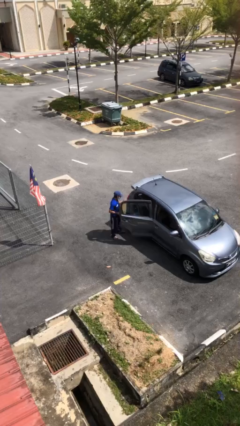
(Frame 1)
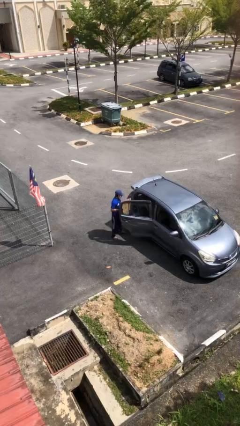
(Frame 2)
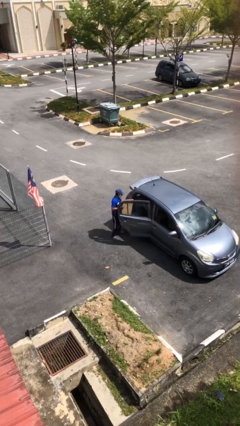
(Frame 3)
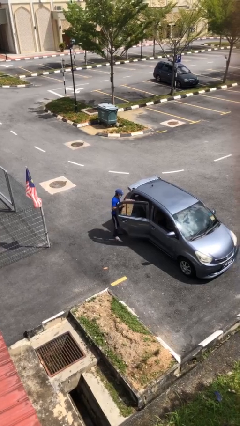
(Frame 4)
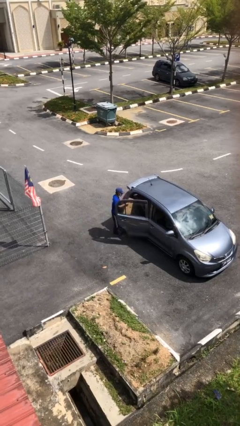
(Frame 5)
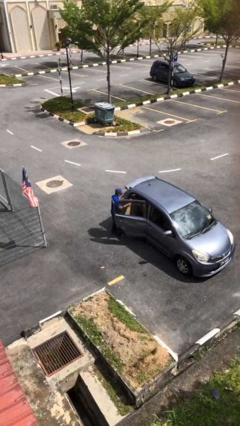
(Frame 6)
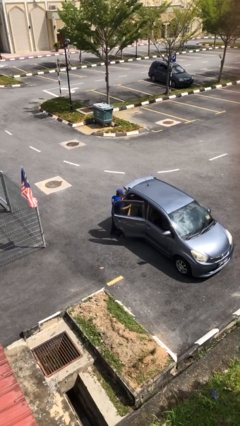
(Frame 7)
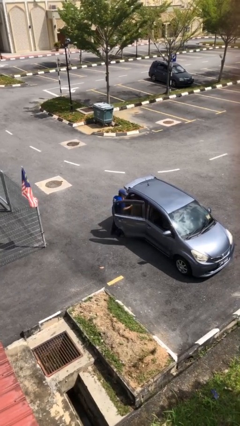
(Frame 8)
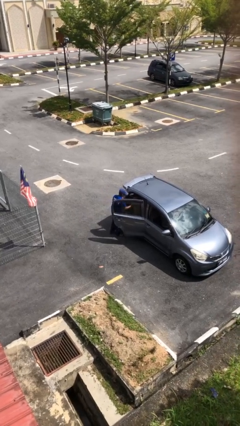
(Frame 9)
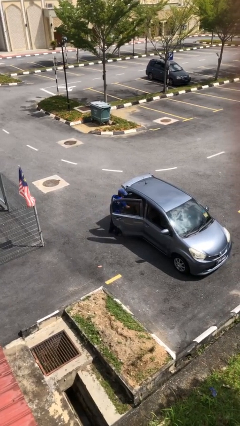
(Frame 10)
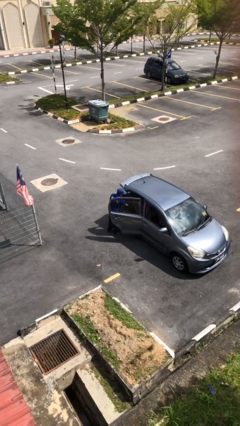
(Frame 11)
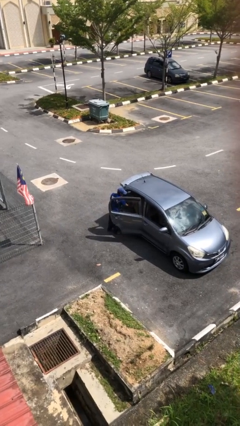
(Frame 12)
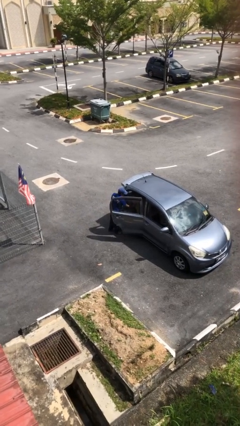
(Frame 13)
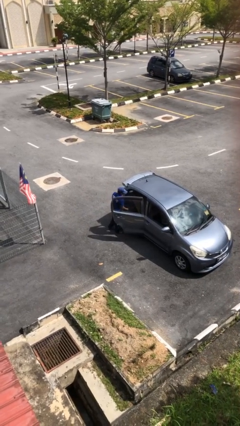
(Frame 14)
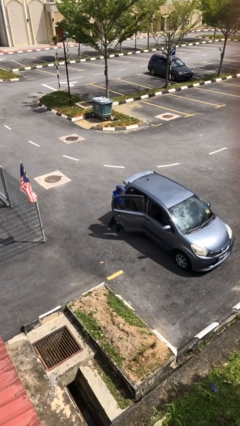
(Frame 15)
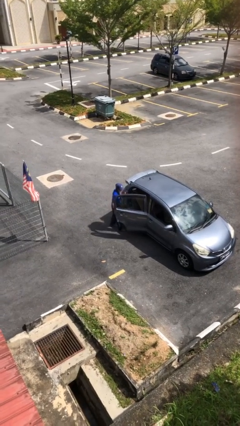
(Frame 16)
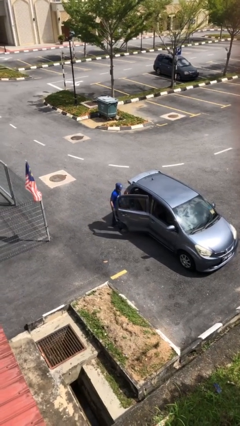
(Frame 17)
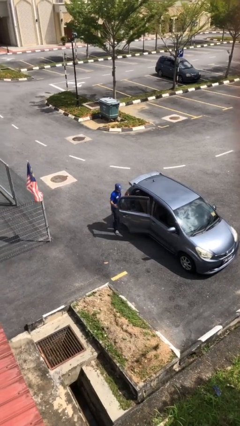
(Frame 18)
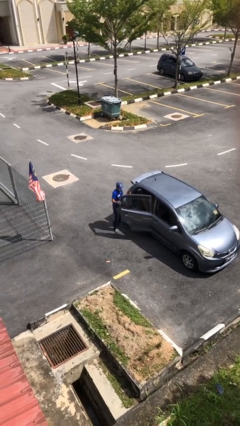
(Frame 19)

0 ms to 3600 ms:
person loads car

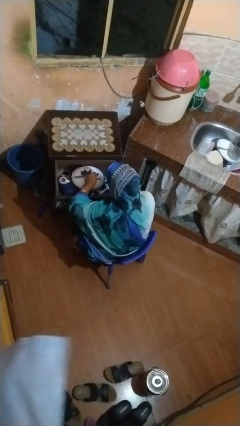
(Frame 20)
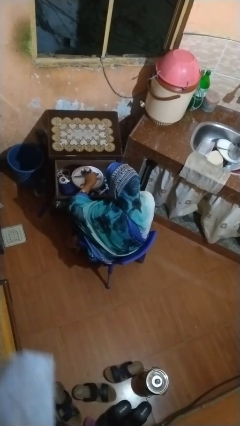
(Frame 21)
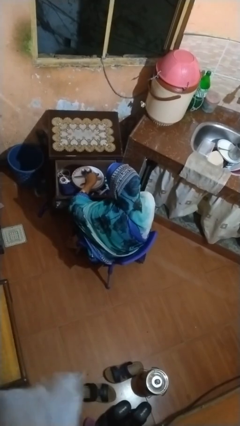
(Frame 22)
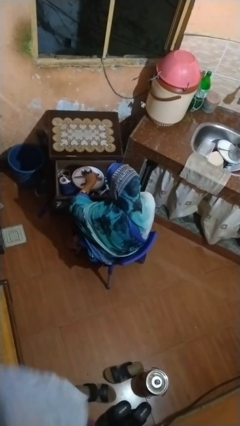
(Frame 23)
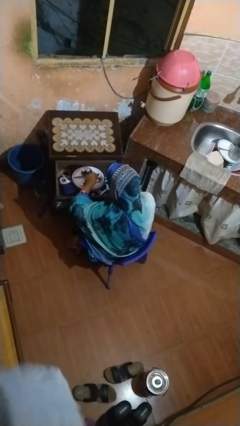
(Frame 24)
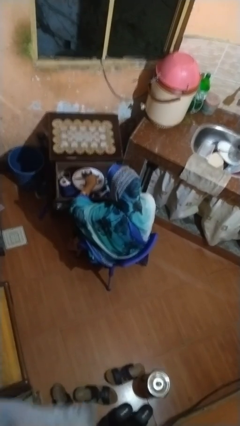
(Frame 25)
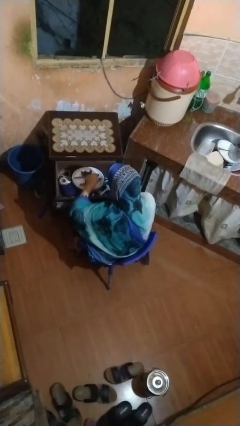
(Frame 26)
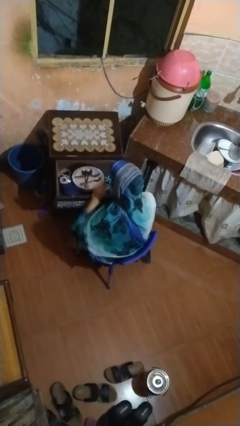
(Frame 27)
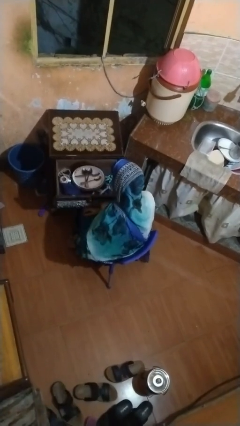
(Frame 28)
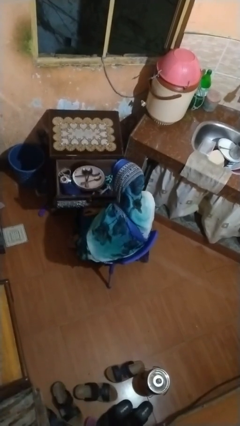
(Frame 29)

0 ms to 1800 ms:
person puts object into kitchen drawer

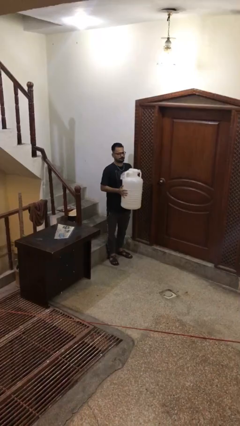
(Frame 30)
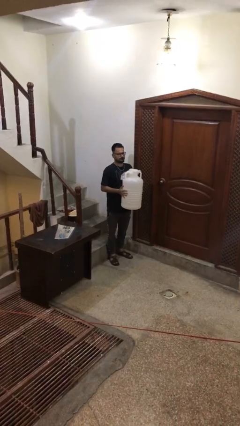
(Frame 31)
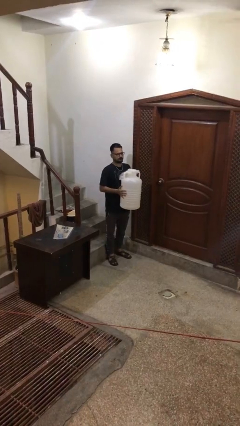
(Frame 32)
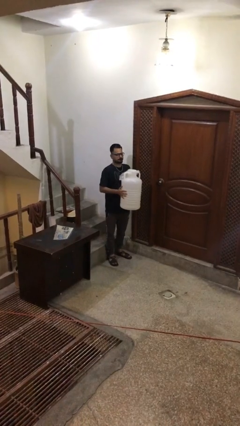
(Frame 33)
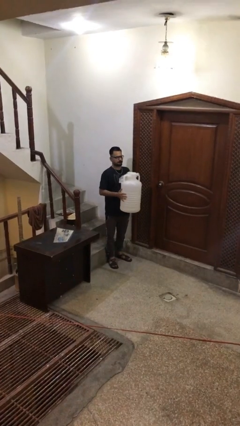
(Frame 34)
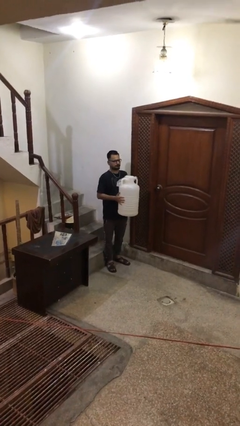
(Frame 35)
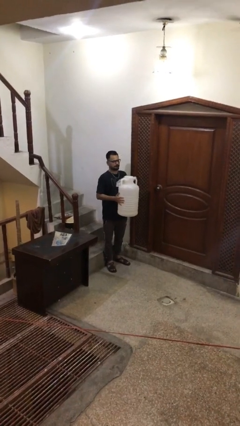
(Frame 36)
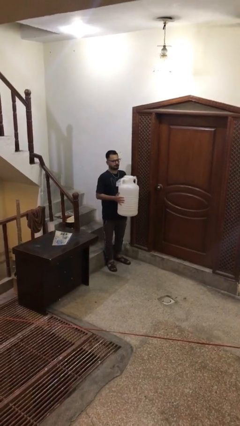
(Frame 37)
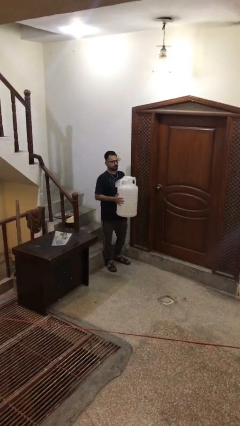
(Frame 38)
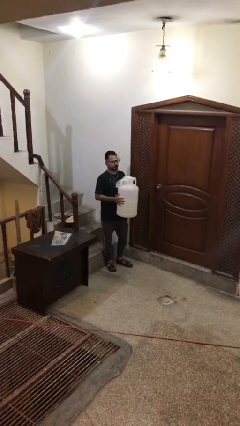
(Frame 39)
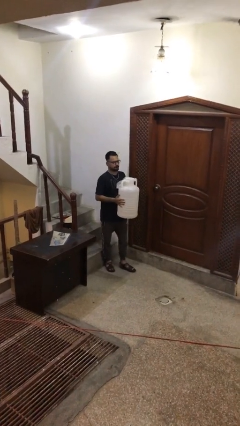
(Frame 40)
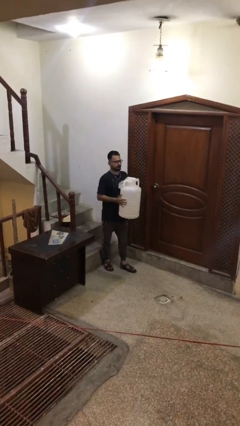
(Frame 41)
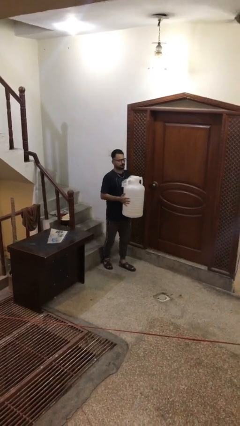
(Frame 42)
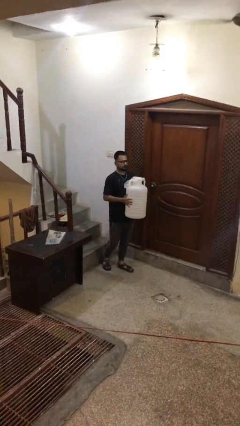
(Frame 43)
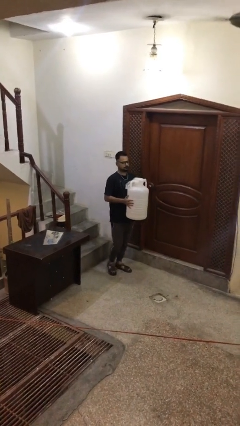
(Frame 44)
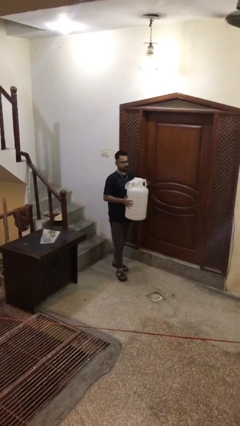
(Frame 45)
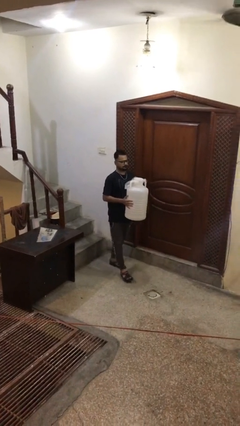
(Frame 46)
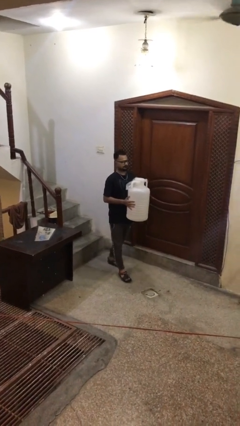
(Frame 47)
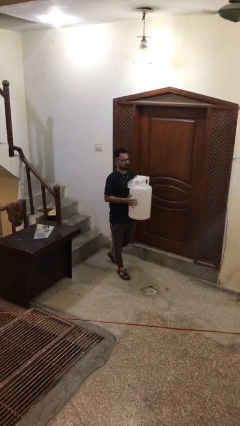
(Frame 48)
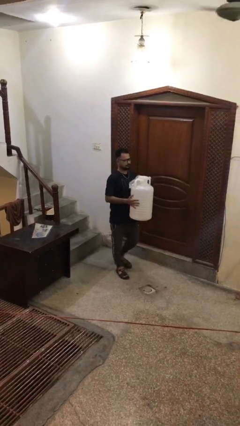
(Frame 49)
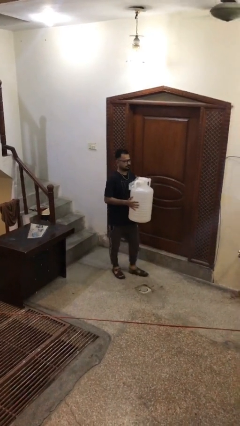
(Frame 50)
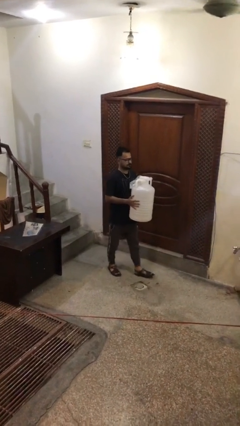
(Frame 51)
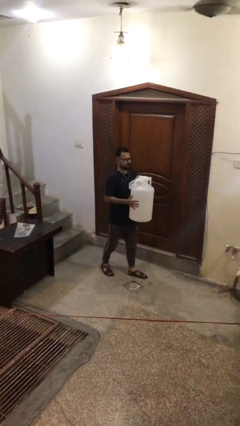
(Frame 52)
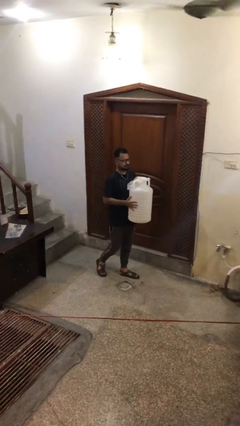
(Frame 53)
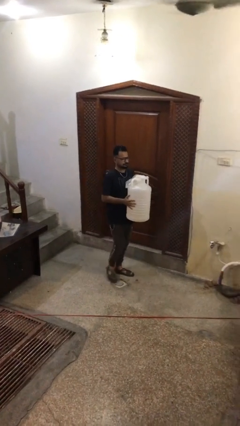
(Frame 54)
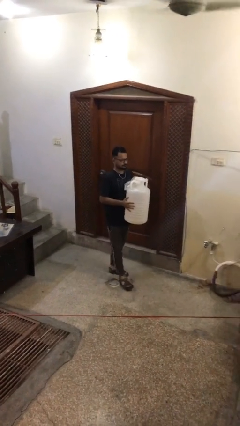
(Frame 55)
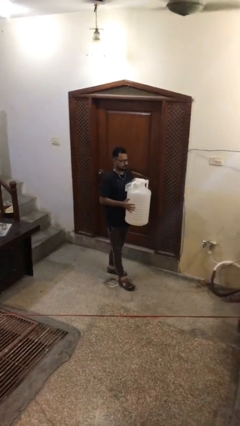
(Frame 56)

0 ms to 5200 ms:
person carries heavy object

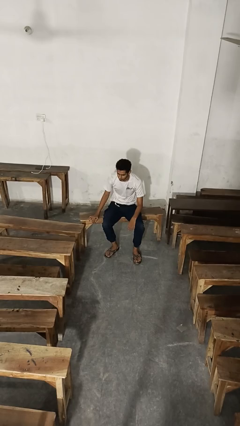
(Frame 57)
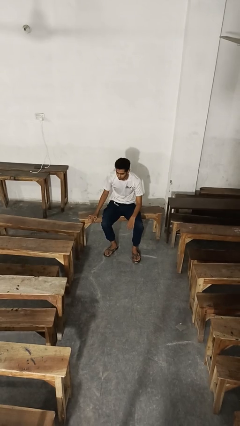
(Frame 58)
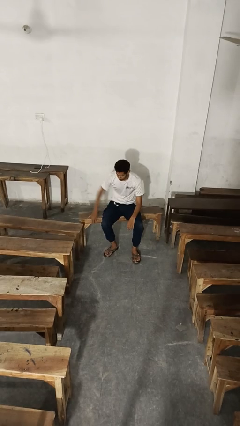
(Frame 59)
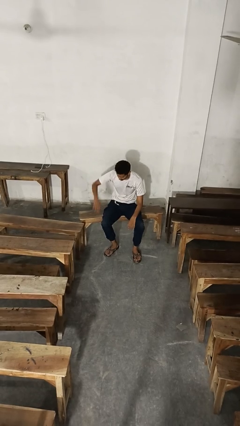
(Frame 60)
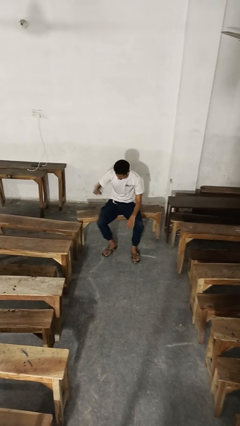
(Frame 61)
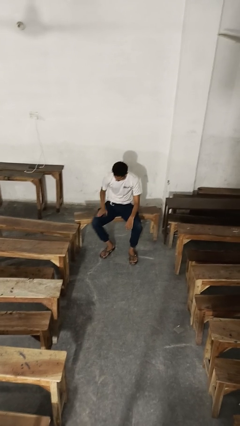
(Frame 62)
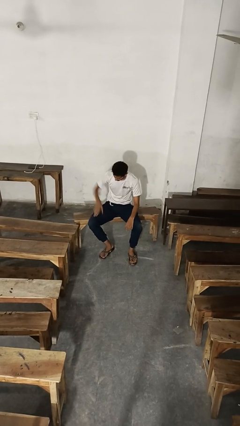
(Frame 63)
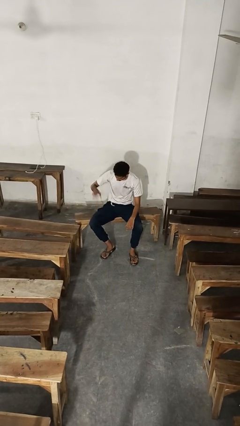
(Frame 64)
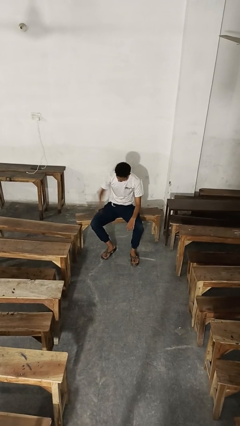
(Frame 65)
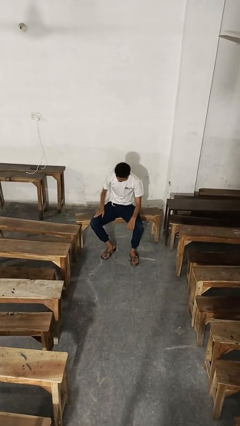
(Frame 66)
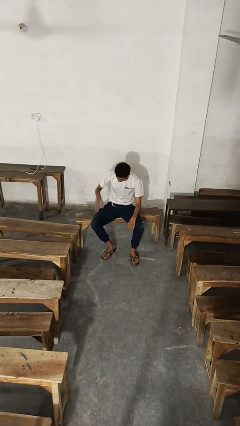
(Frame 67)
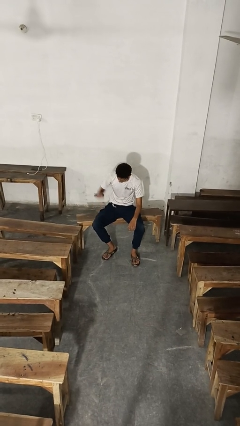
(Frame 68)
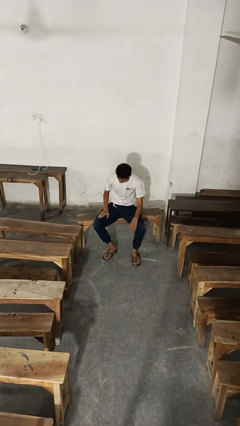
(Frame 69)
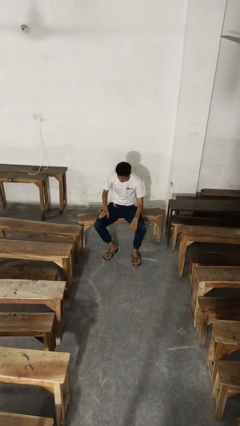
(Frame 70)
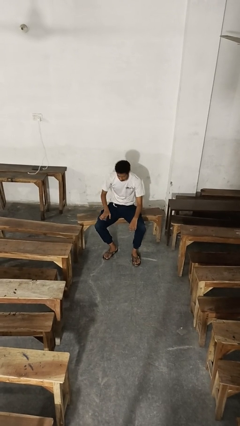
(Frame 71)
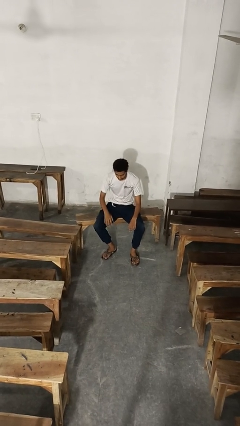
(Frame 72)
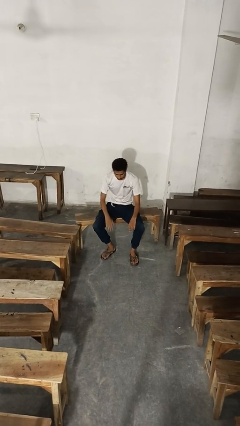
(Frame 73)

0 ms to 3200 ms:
person slaps hands on thighs

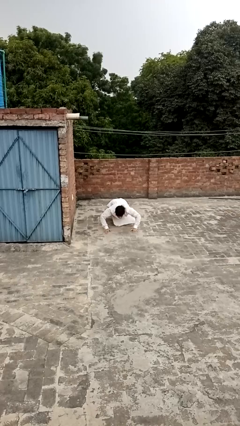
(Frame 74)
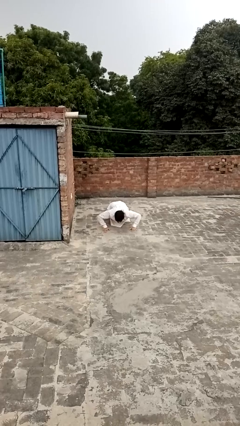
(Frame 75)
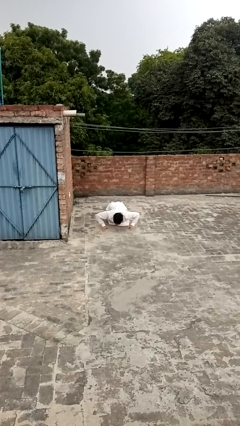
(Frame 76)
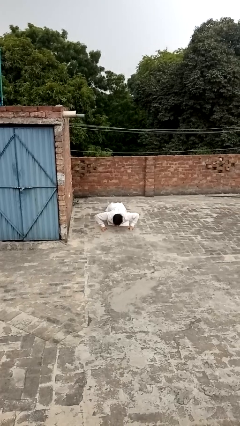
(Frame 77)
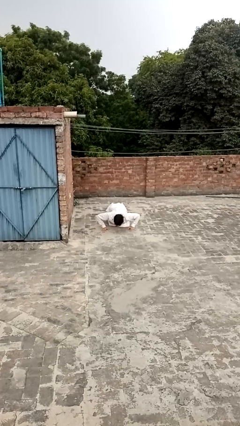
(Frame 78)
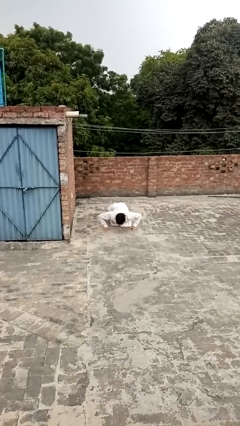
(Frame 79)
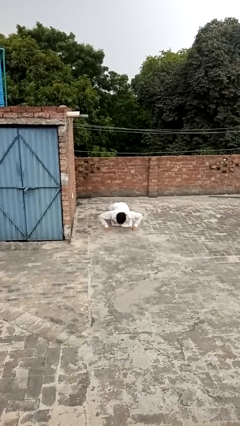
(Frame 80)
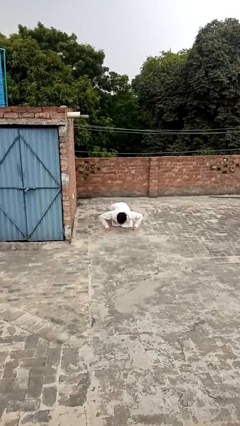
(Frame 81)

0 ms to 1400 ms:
person exercises with pushup

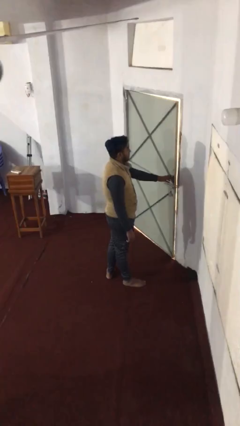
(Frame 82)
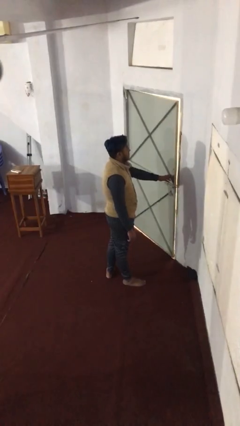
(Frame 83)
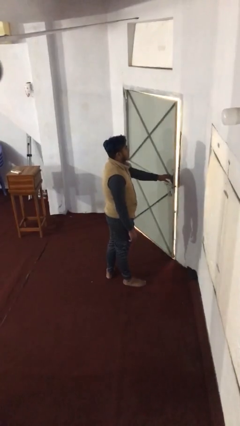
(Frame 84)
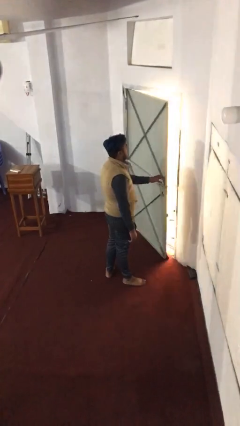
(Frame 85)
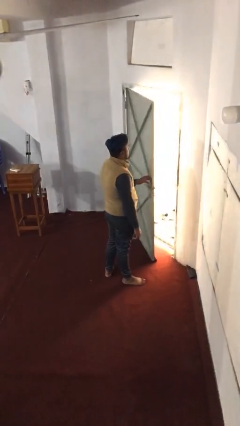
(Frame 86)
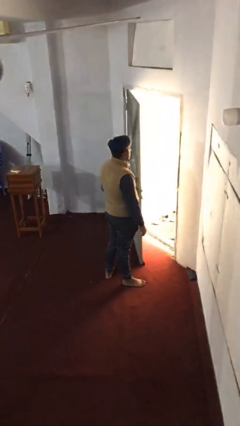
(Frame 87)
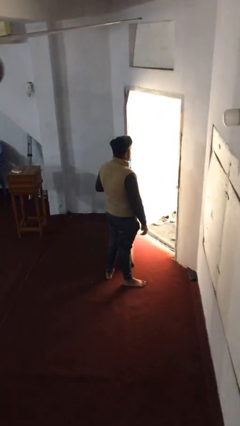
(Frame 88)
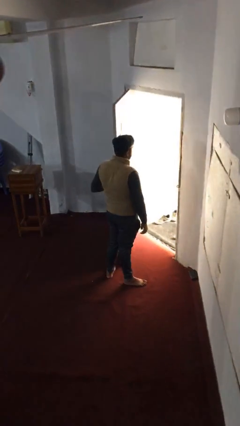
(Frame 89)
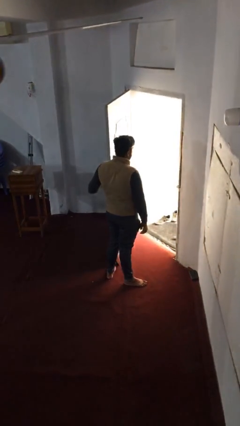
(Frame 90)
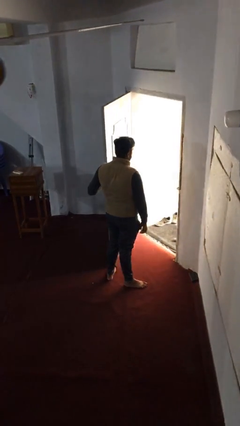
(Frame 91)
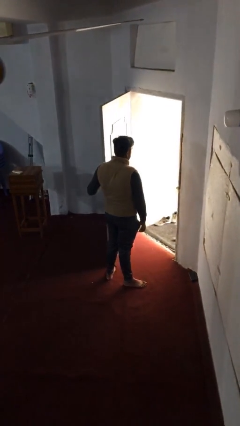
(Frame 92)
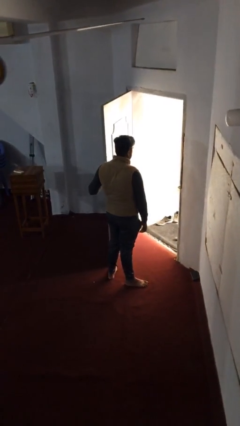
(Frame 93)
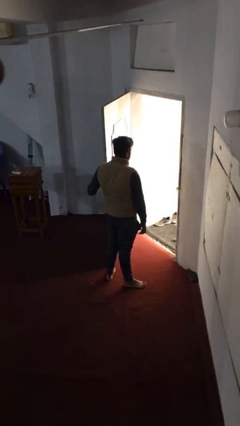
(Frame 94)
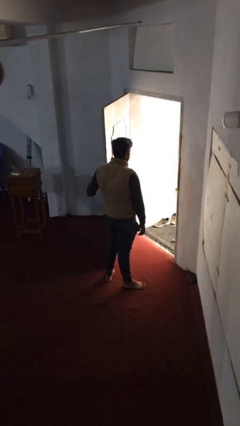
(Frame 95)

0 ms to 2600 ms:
person opens facility door
